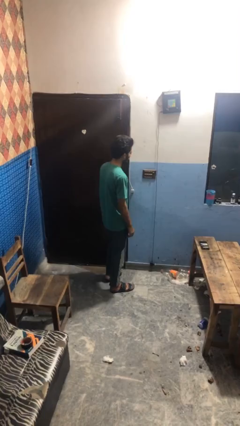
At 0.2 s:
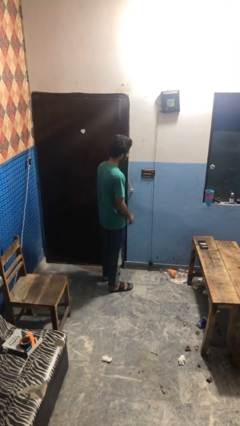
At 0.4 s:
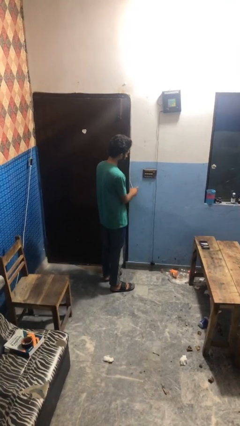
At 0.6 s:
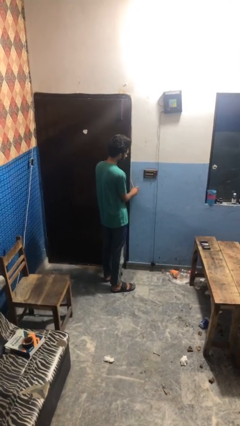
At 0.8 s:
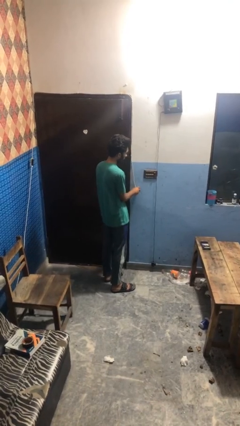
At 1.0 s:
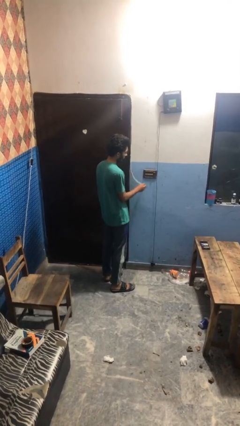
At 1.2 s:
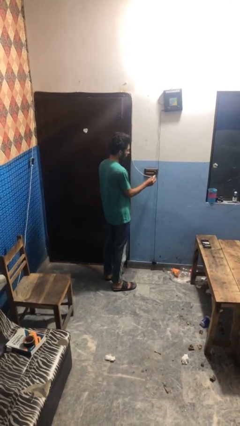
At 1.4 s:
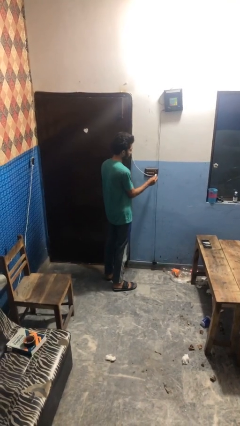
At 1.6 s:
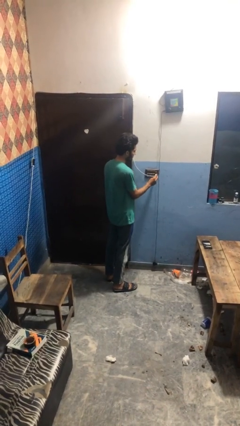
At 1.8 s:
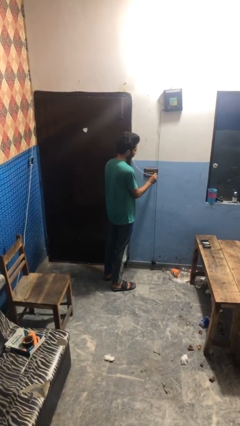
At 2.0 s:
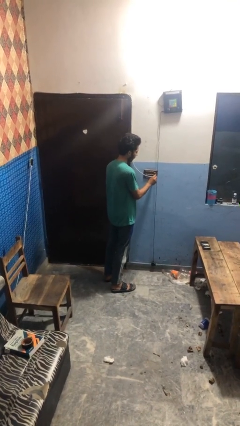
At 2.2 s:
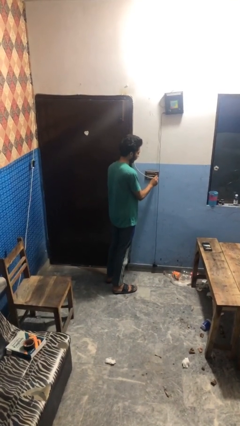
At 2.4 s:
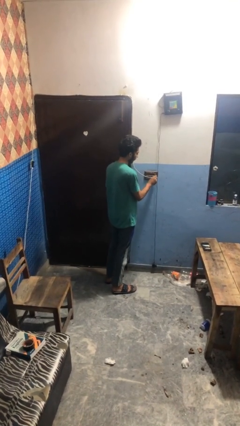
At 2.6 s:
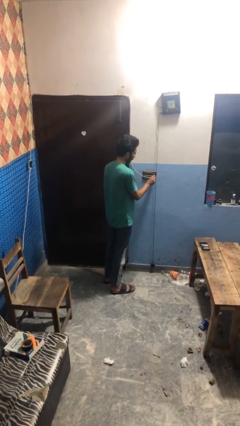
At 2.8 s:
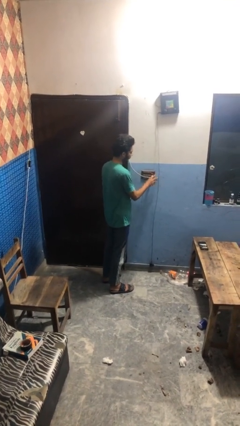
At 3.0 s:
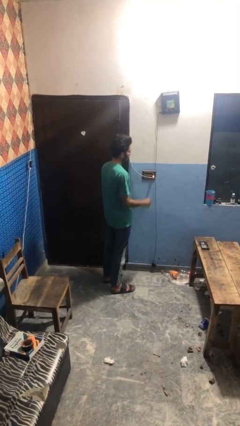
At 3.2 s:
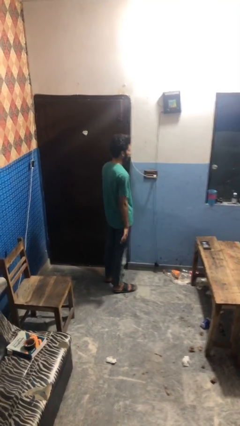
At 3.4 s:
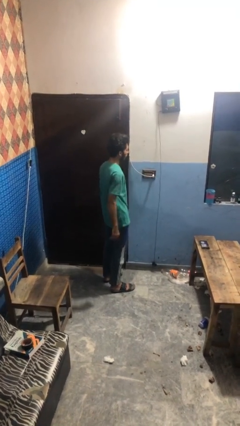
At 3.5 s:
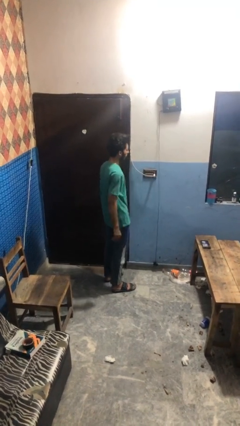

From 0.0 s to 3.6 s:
person plugs into electrical socket

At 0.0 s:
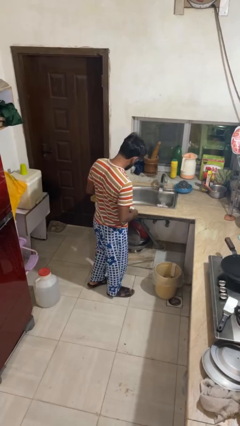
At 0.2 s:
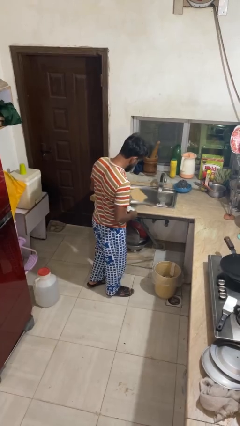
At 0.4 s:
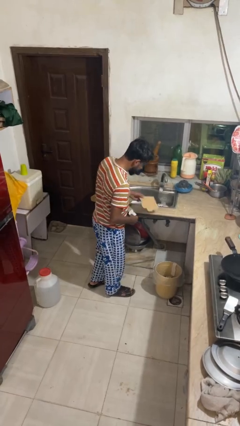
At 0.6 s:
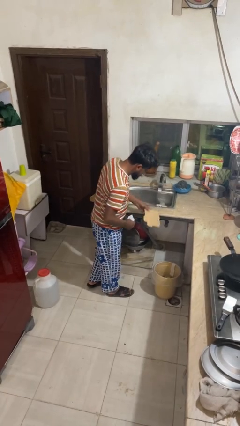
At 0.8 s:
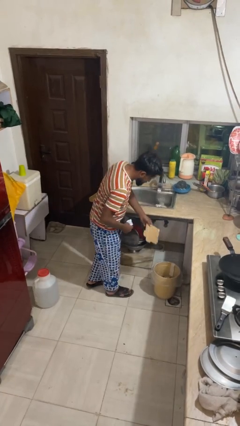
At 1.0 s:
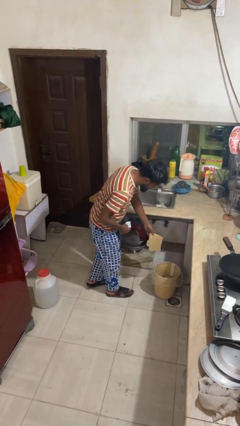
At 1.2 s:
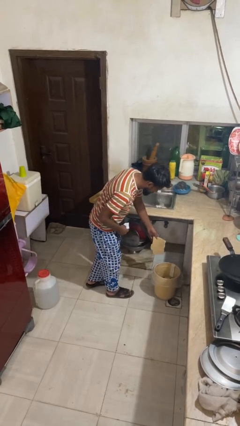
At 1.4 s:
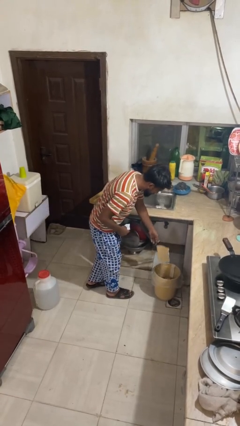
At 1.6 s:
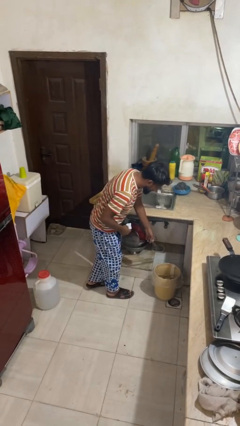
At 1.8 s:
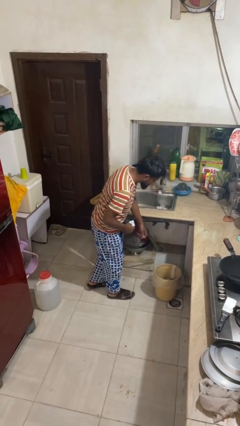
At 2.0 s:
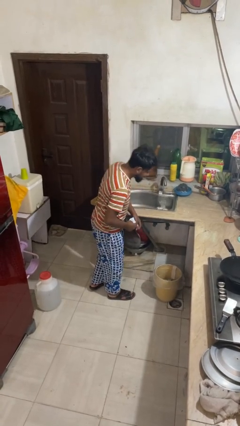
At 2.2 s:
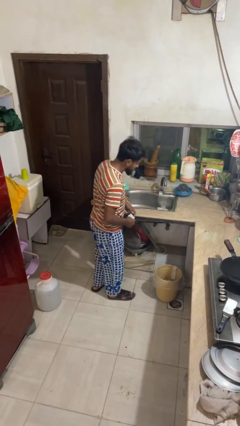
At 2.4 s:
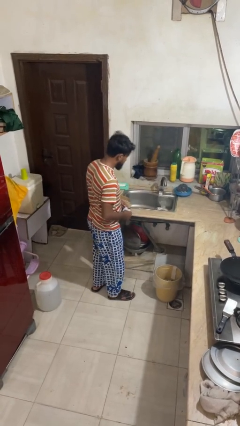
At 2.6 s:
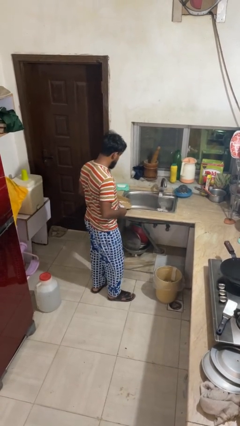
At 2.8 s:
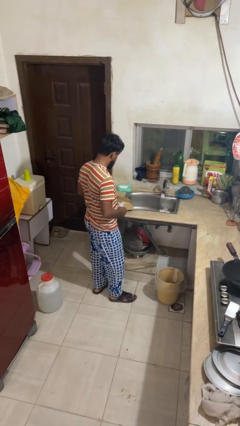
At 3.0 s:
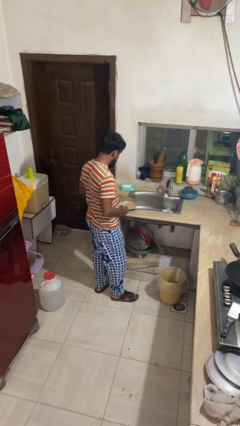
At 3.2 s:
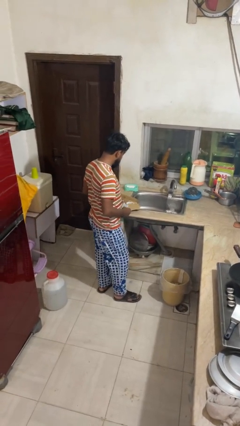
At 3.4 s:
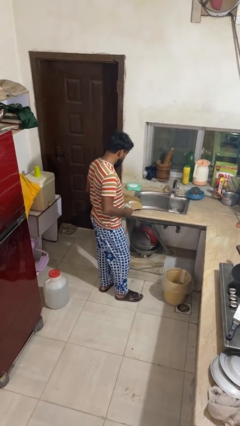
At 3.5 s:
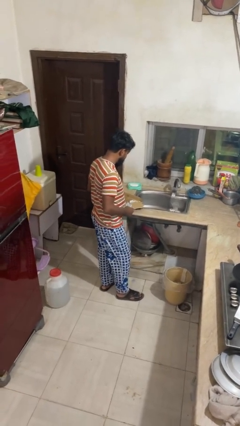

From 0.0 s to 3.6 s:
person discards trash

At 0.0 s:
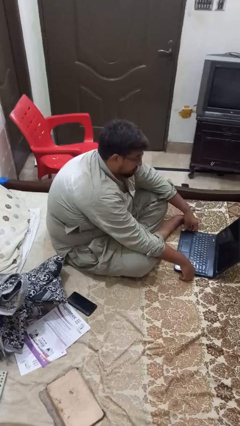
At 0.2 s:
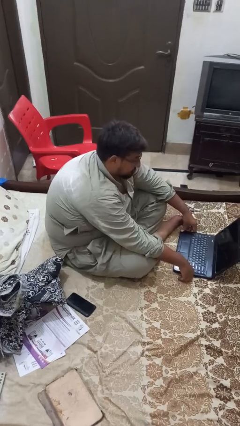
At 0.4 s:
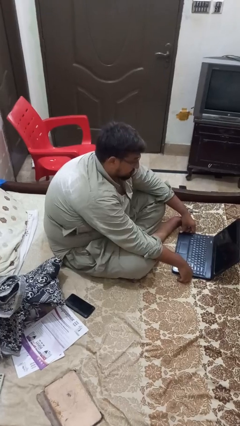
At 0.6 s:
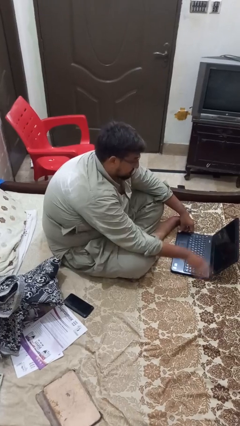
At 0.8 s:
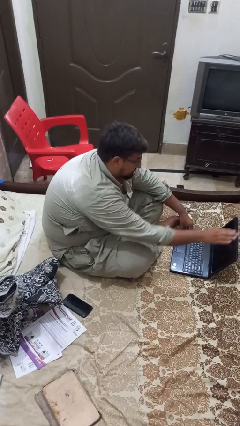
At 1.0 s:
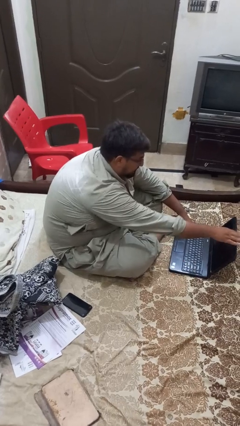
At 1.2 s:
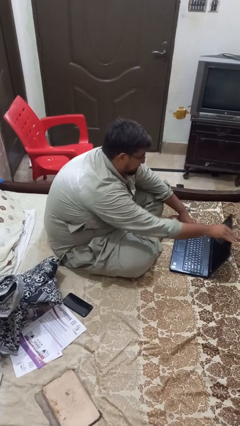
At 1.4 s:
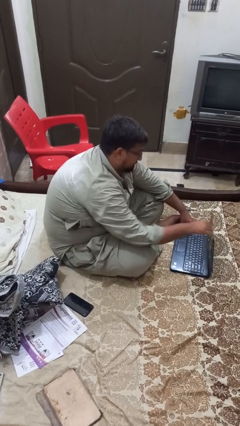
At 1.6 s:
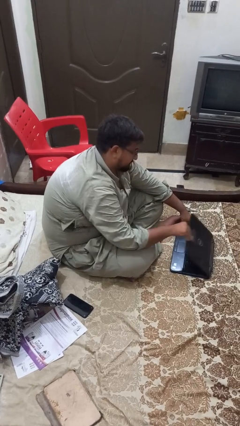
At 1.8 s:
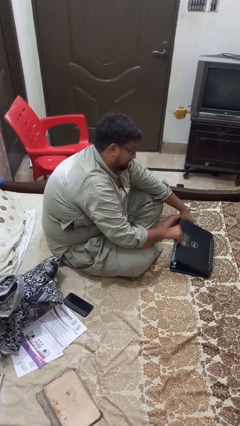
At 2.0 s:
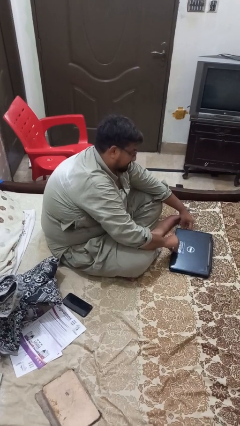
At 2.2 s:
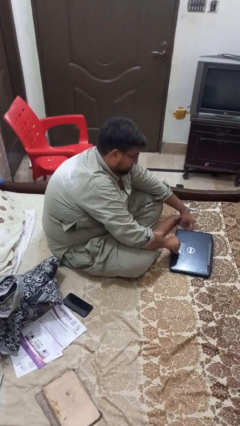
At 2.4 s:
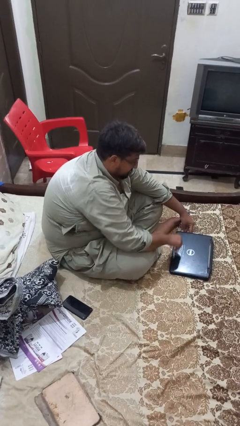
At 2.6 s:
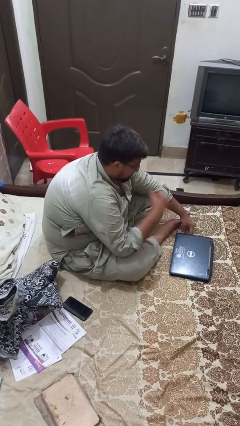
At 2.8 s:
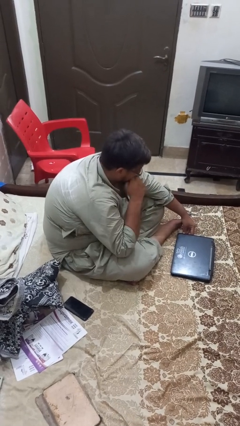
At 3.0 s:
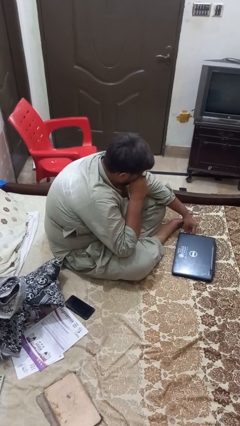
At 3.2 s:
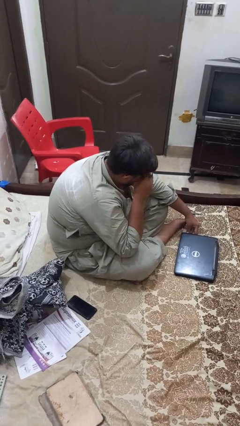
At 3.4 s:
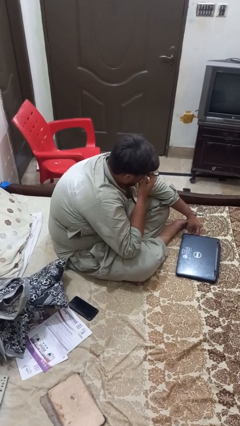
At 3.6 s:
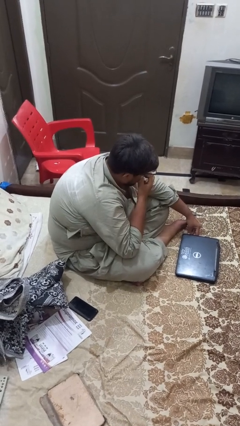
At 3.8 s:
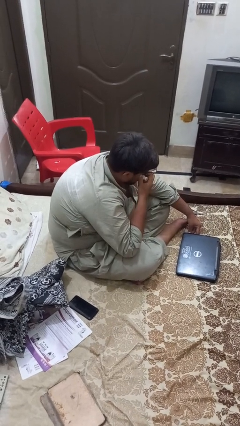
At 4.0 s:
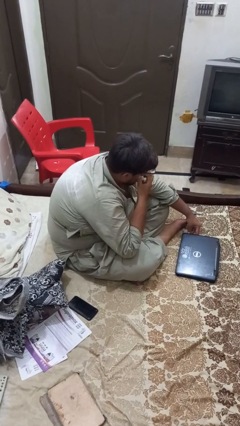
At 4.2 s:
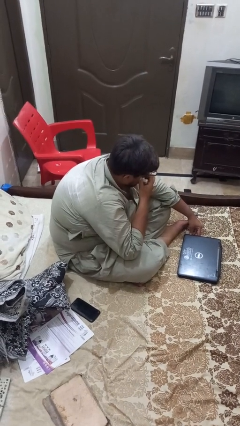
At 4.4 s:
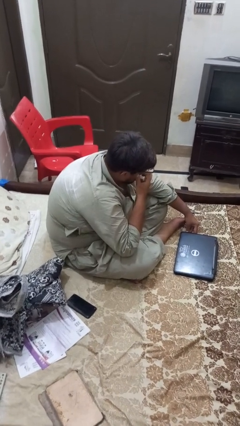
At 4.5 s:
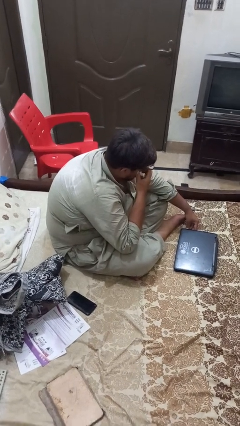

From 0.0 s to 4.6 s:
person closes laptop

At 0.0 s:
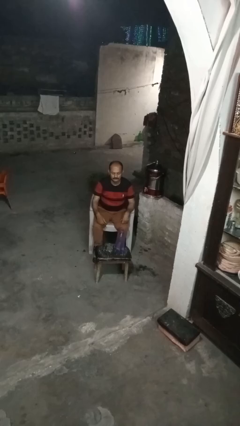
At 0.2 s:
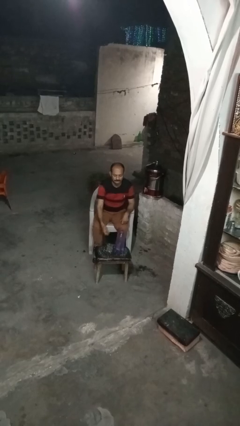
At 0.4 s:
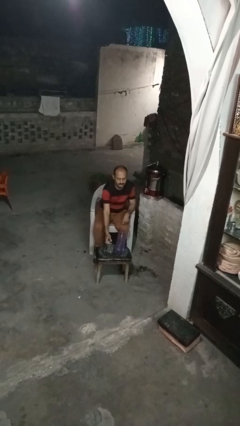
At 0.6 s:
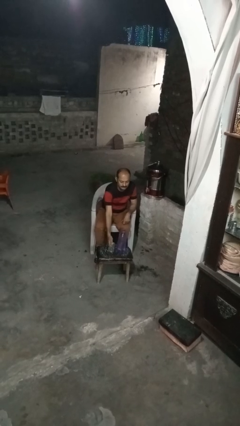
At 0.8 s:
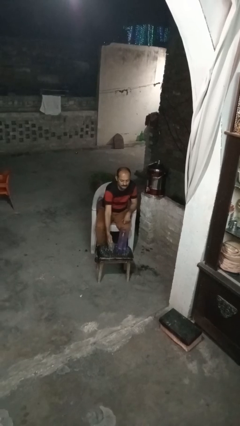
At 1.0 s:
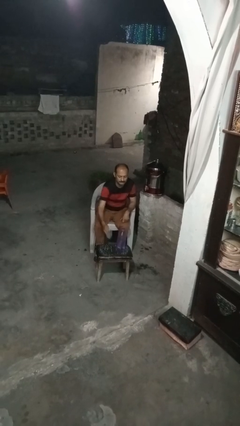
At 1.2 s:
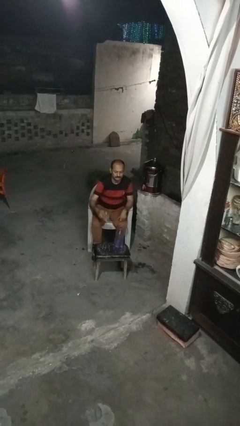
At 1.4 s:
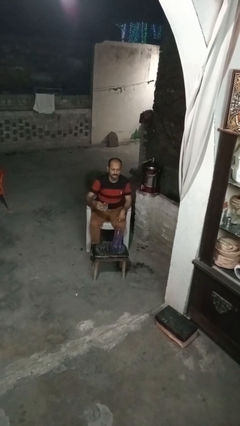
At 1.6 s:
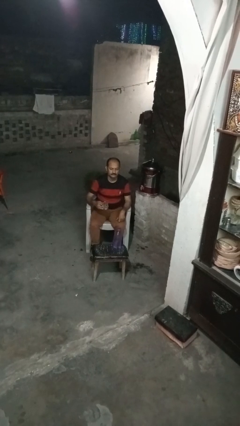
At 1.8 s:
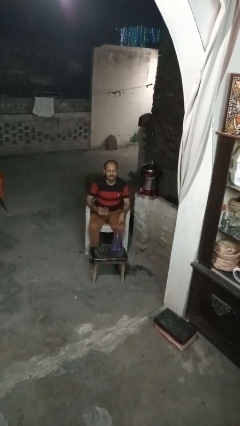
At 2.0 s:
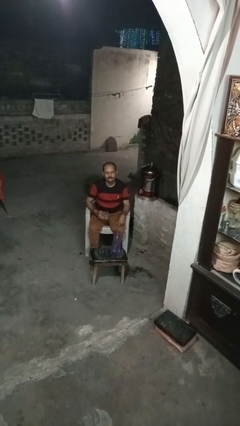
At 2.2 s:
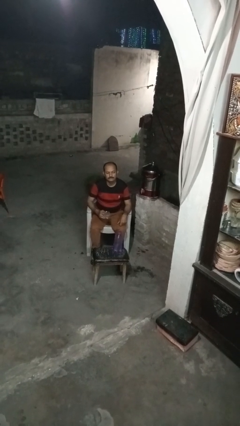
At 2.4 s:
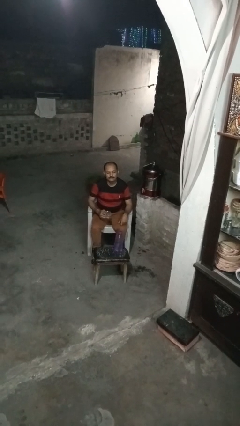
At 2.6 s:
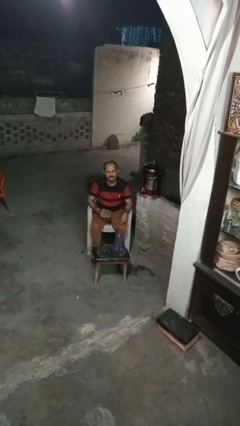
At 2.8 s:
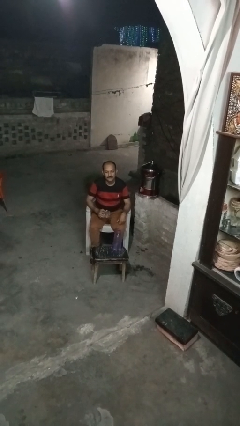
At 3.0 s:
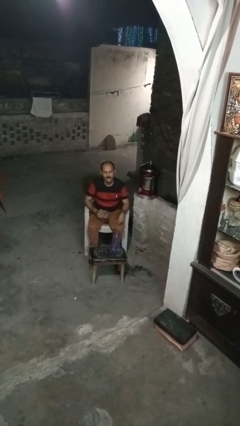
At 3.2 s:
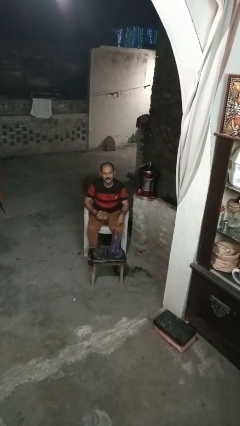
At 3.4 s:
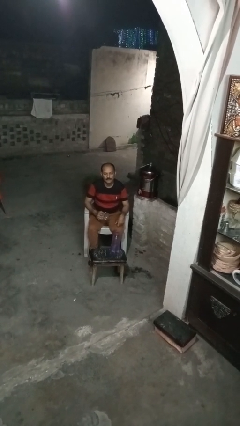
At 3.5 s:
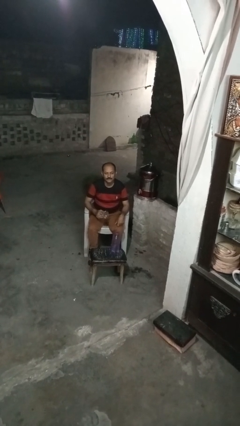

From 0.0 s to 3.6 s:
person picks up object from table

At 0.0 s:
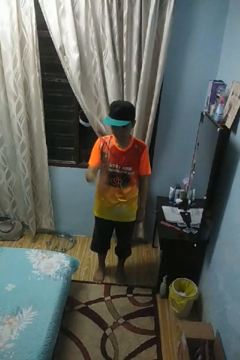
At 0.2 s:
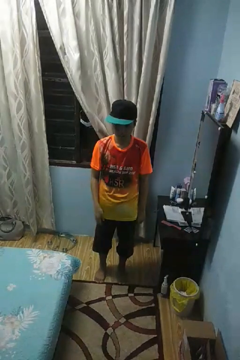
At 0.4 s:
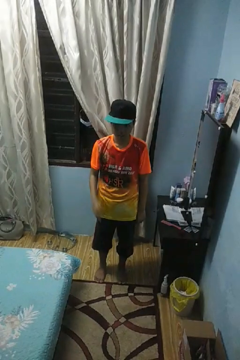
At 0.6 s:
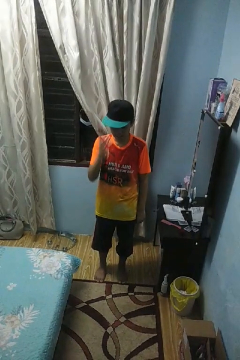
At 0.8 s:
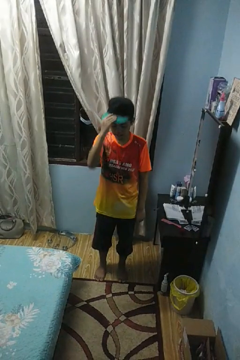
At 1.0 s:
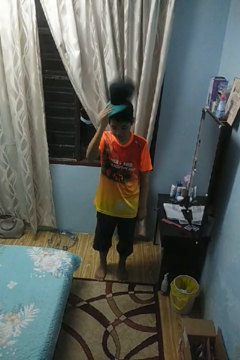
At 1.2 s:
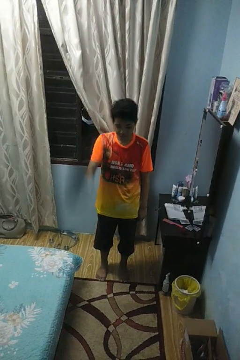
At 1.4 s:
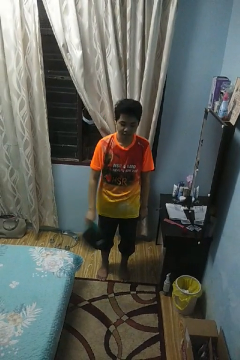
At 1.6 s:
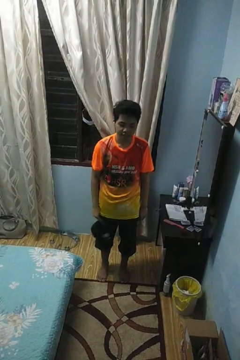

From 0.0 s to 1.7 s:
person takes off hat

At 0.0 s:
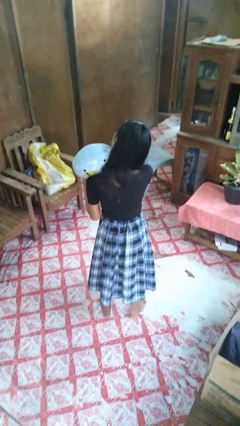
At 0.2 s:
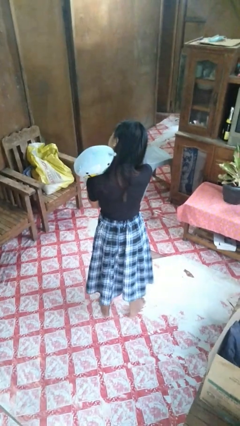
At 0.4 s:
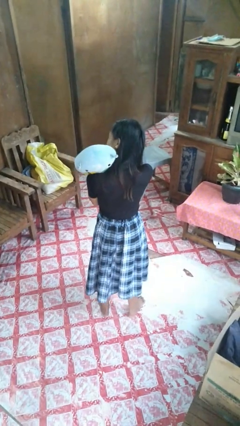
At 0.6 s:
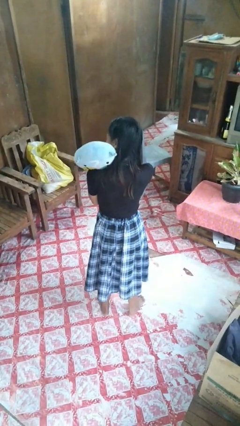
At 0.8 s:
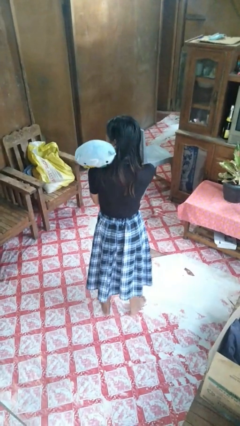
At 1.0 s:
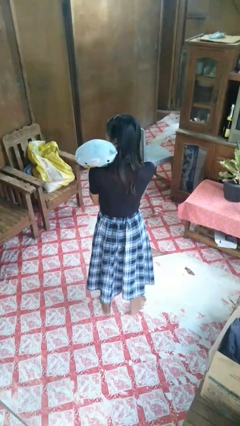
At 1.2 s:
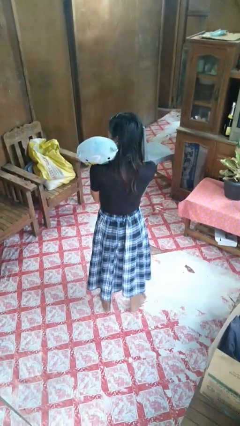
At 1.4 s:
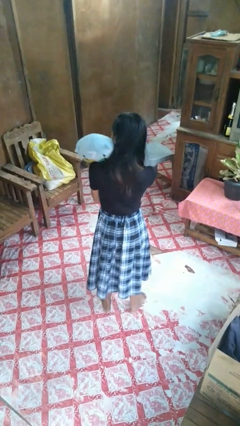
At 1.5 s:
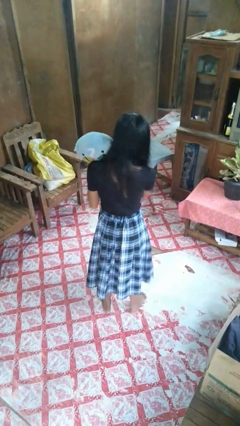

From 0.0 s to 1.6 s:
person hugs stuffed animal
